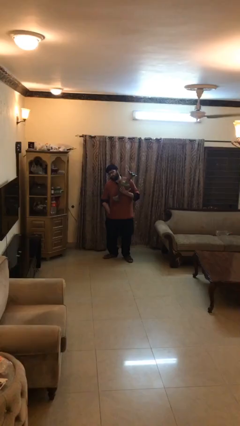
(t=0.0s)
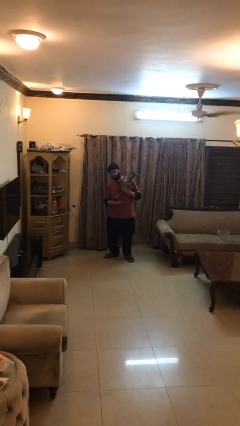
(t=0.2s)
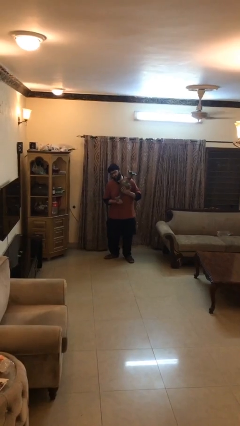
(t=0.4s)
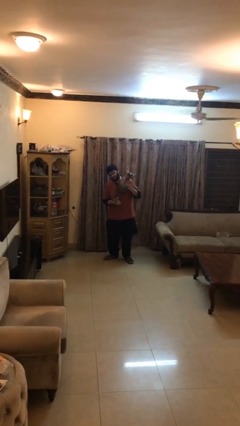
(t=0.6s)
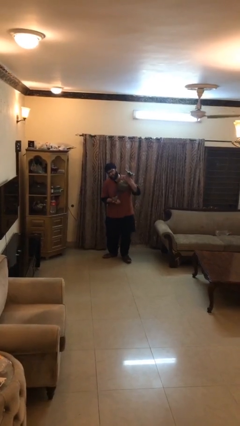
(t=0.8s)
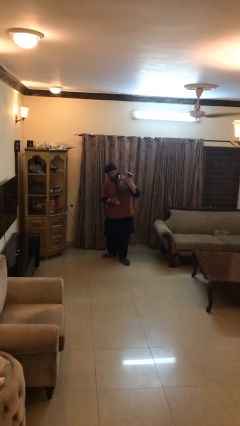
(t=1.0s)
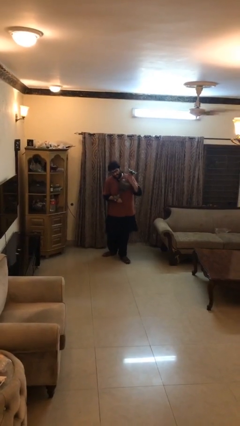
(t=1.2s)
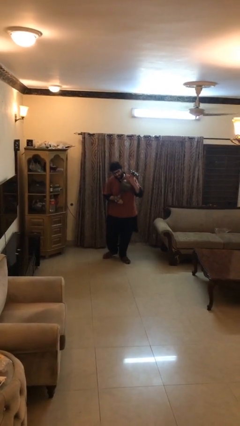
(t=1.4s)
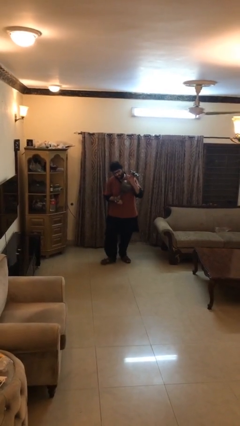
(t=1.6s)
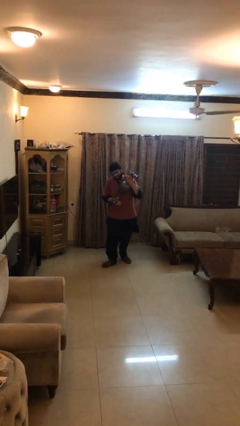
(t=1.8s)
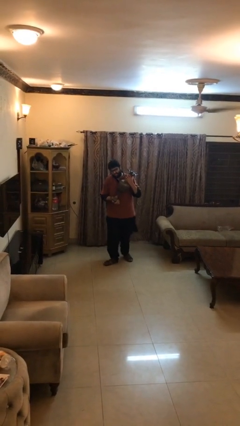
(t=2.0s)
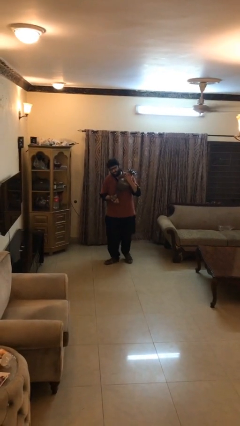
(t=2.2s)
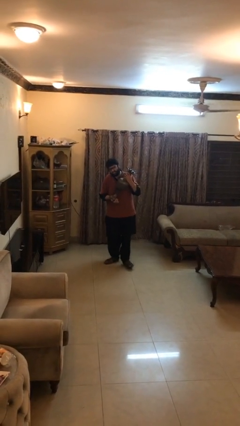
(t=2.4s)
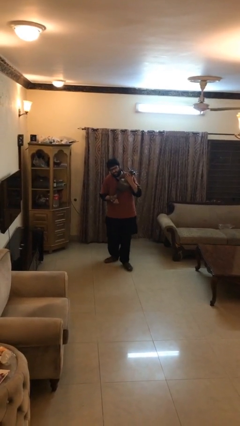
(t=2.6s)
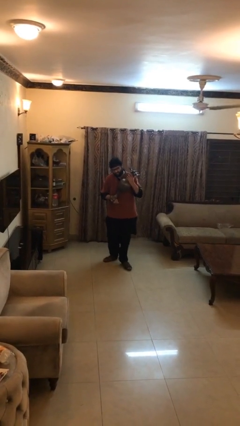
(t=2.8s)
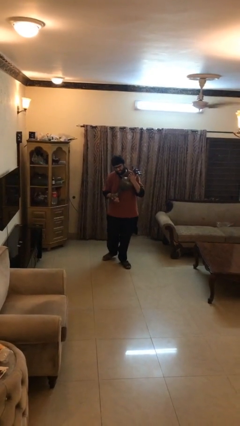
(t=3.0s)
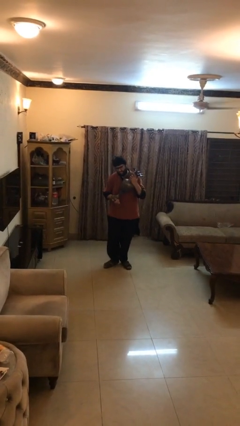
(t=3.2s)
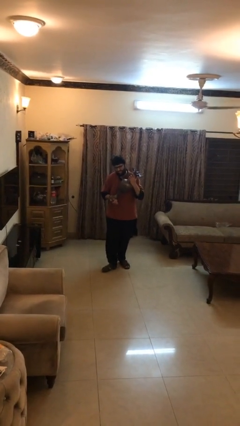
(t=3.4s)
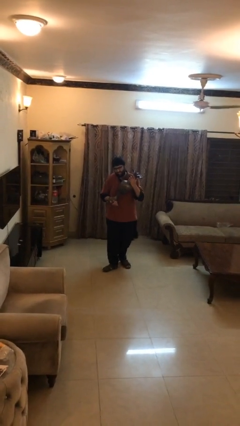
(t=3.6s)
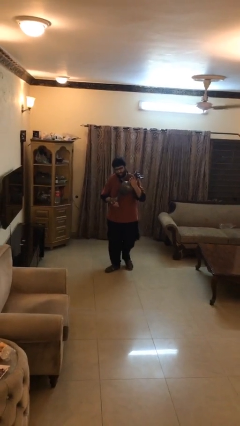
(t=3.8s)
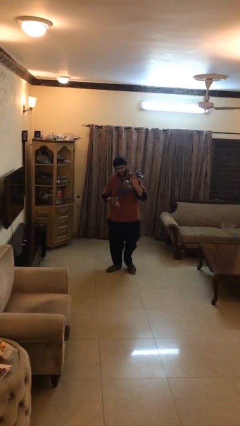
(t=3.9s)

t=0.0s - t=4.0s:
person carries heavy object

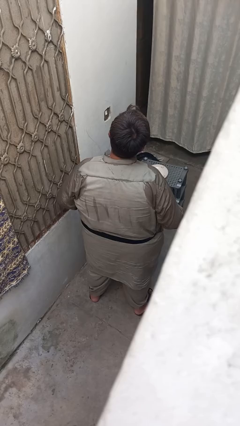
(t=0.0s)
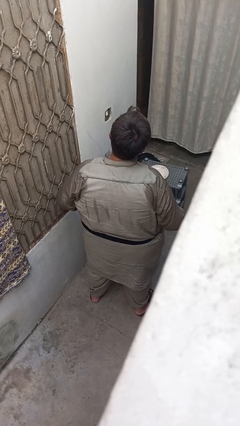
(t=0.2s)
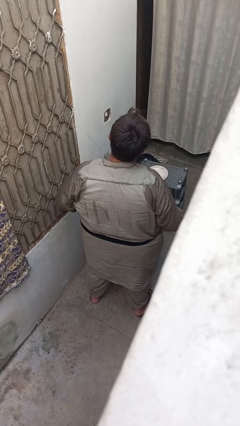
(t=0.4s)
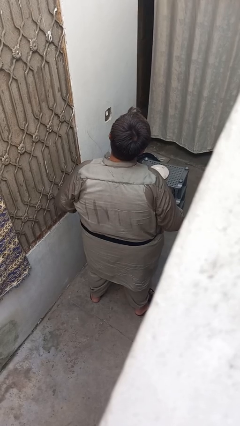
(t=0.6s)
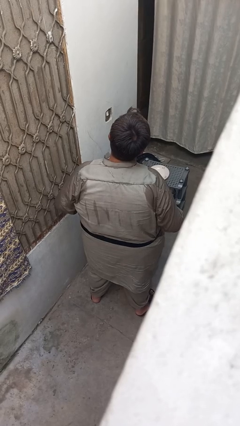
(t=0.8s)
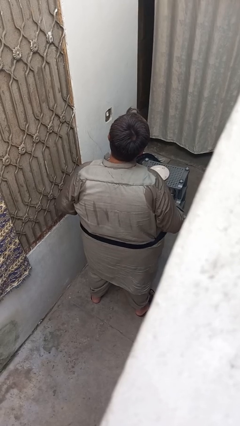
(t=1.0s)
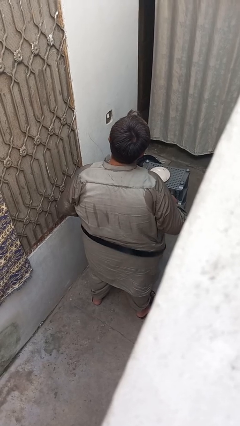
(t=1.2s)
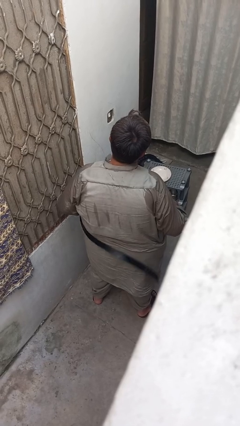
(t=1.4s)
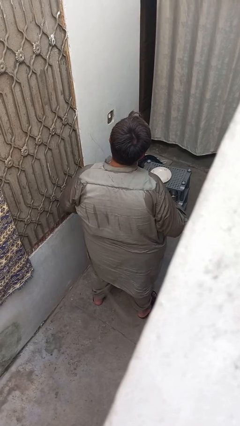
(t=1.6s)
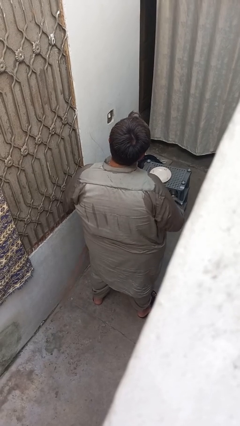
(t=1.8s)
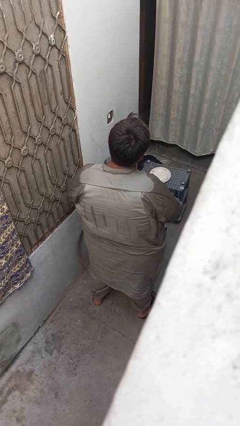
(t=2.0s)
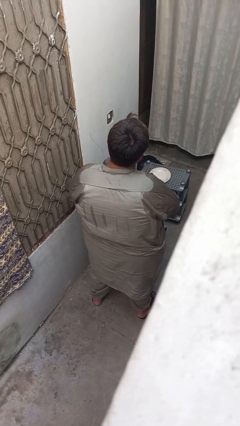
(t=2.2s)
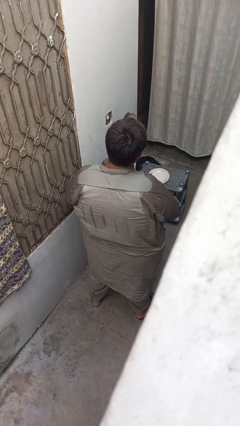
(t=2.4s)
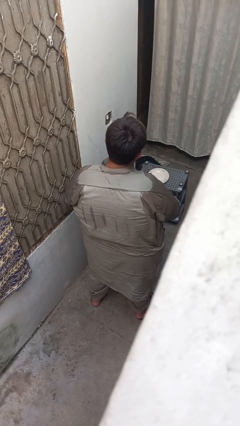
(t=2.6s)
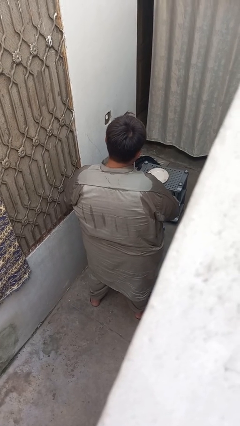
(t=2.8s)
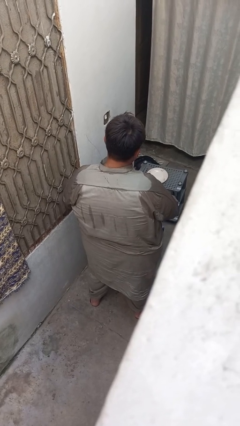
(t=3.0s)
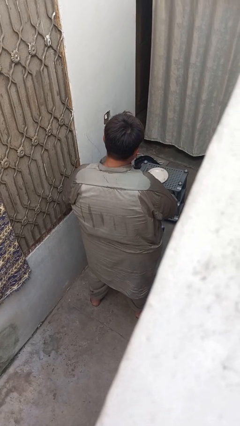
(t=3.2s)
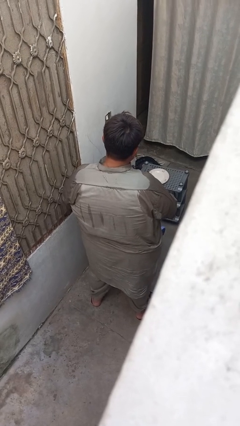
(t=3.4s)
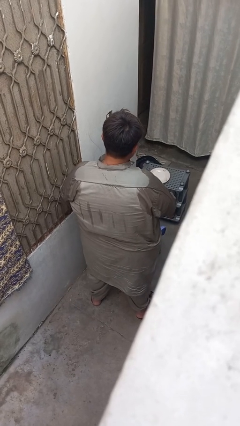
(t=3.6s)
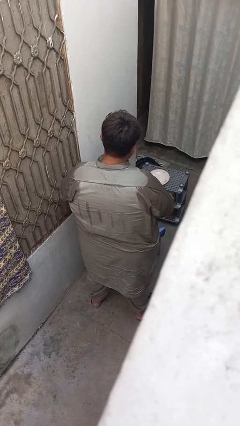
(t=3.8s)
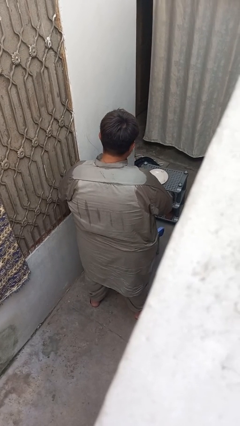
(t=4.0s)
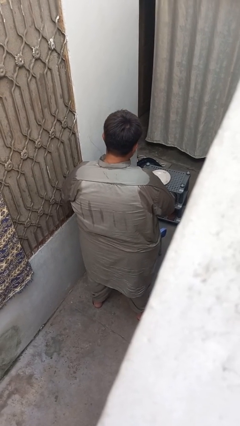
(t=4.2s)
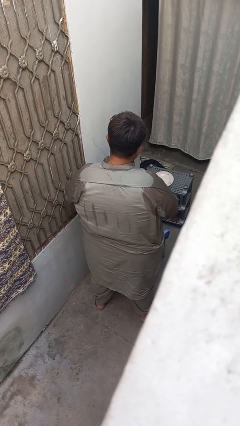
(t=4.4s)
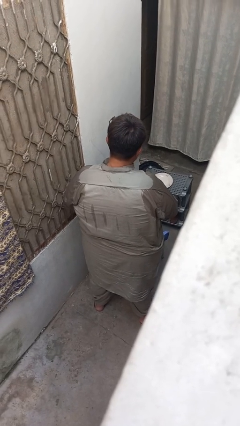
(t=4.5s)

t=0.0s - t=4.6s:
person takes off belt

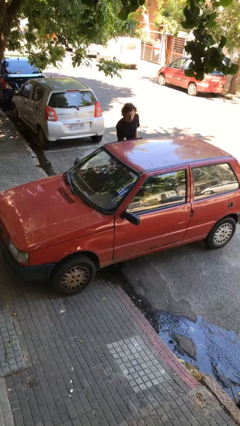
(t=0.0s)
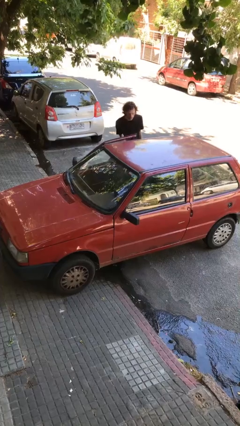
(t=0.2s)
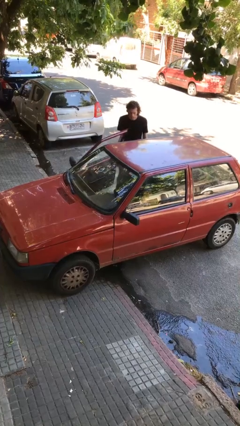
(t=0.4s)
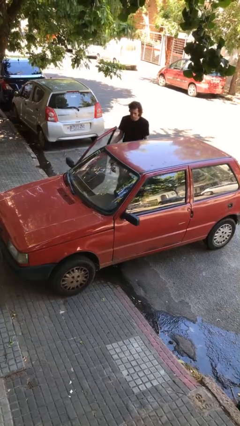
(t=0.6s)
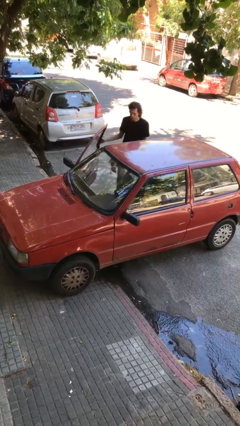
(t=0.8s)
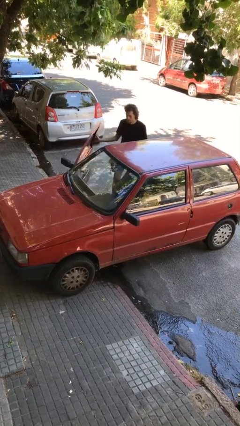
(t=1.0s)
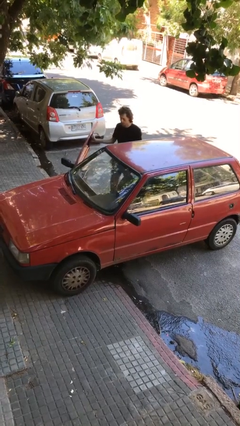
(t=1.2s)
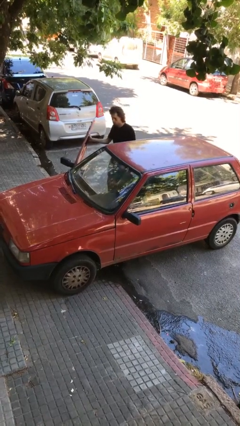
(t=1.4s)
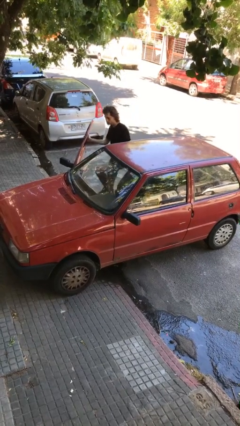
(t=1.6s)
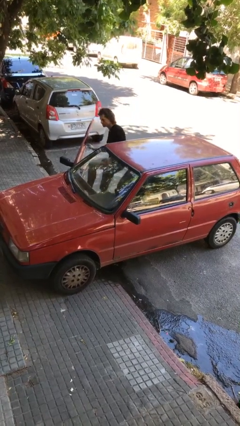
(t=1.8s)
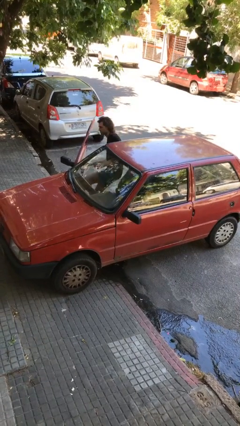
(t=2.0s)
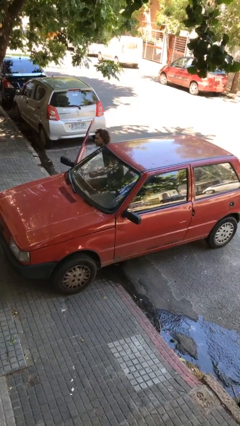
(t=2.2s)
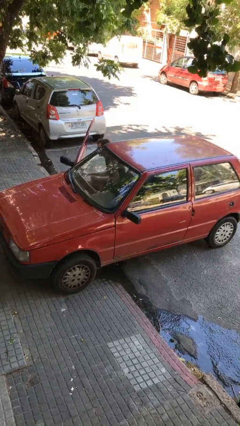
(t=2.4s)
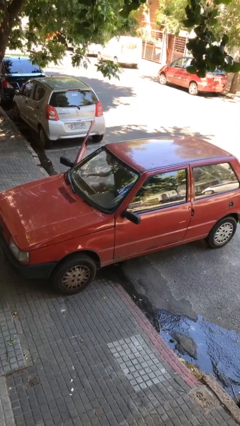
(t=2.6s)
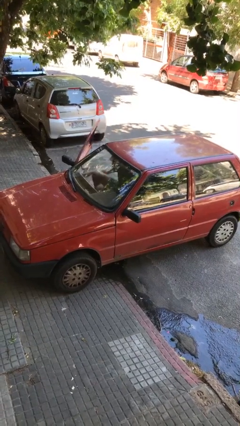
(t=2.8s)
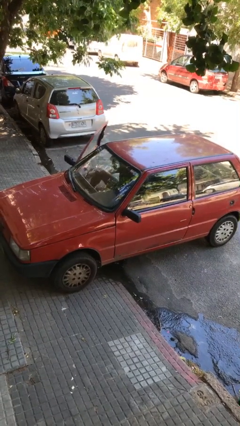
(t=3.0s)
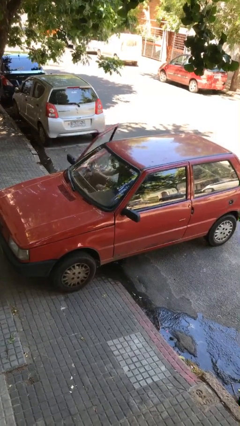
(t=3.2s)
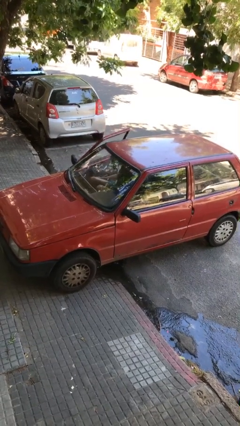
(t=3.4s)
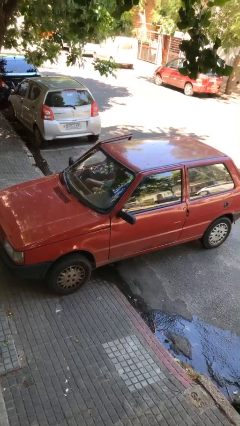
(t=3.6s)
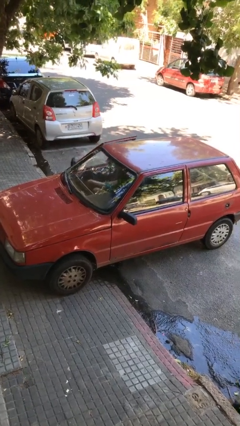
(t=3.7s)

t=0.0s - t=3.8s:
car picks up person

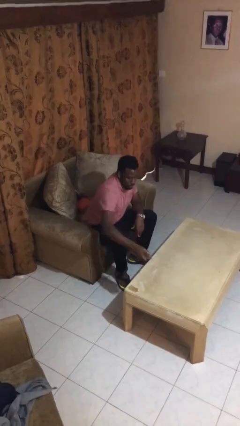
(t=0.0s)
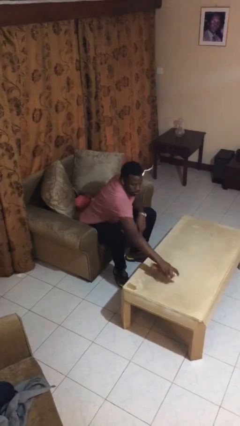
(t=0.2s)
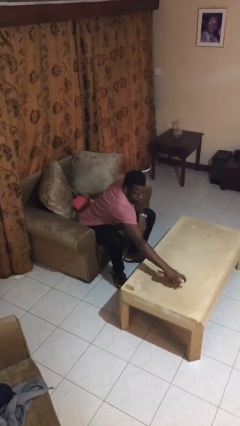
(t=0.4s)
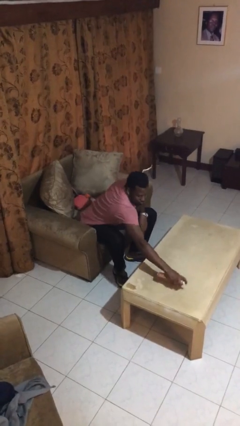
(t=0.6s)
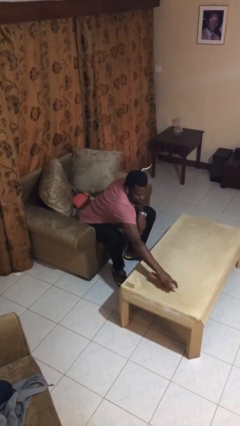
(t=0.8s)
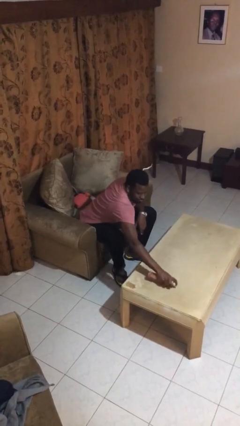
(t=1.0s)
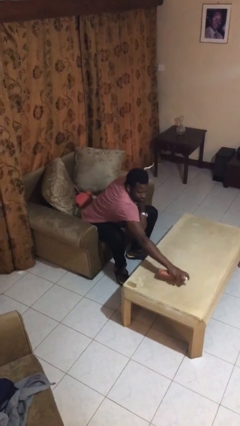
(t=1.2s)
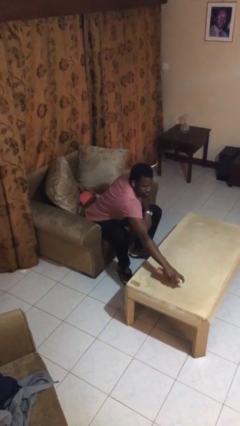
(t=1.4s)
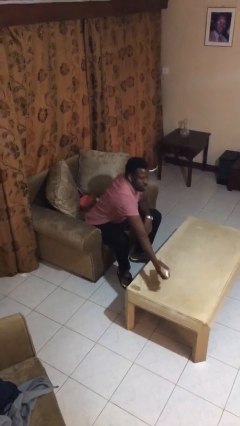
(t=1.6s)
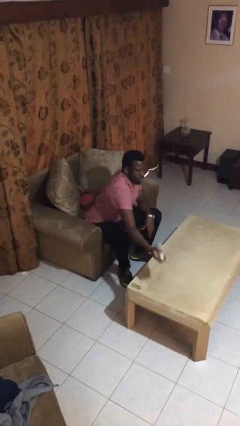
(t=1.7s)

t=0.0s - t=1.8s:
person sprays from bottle

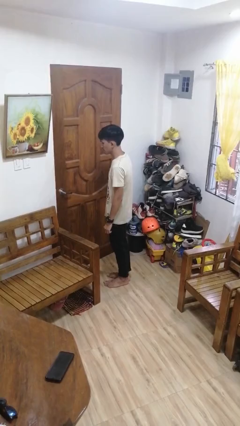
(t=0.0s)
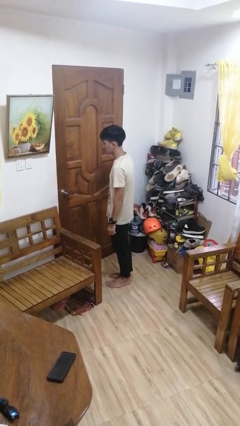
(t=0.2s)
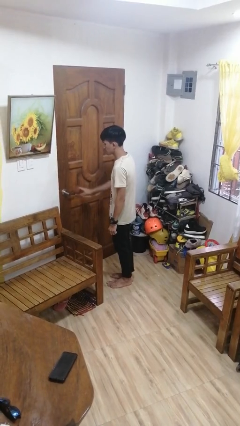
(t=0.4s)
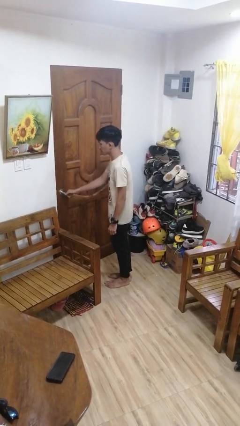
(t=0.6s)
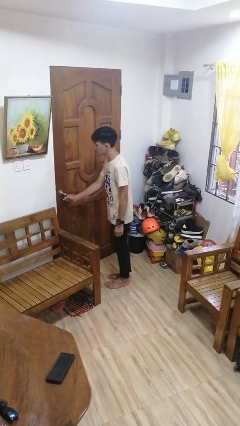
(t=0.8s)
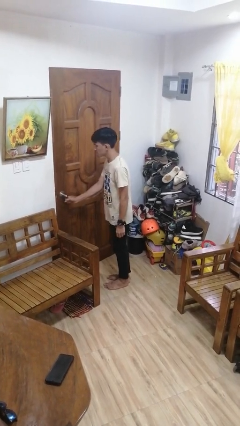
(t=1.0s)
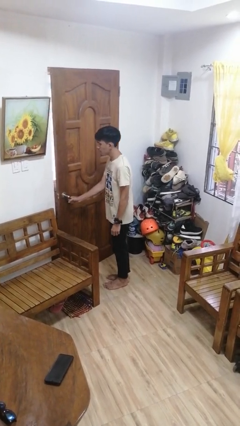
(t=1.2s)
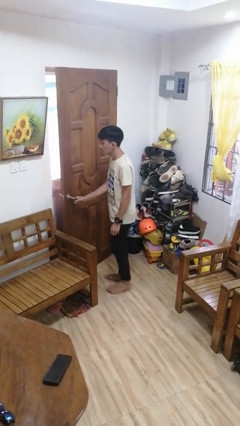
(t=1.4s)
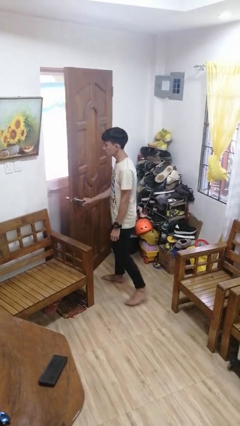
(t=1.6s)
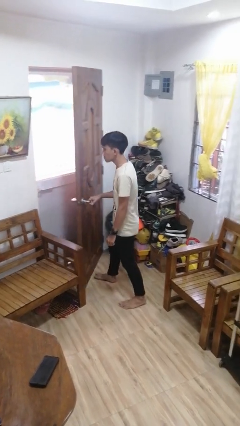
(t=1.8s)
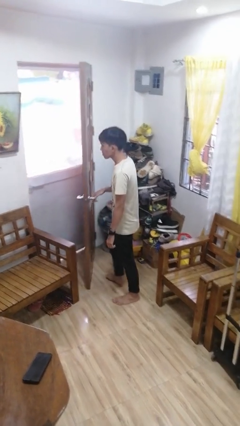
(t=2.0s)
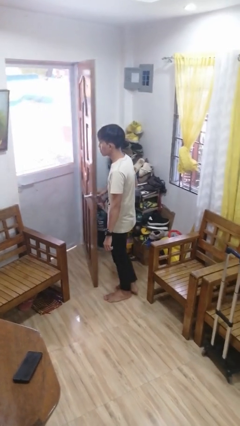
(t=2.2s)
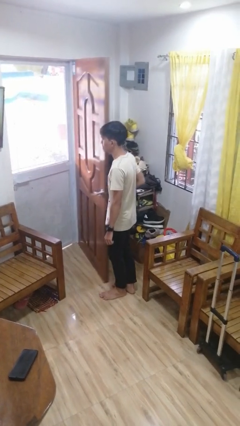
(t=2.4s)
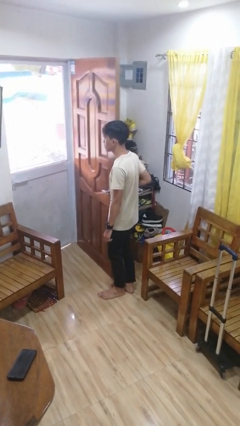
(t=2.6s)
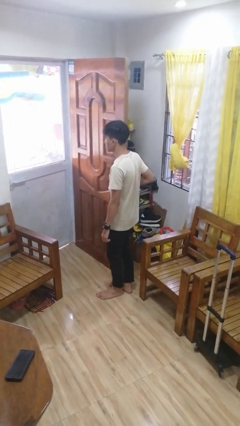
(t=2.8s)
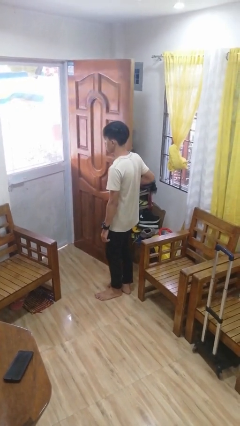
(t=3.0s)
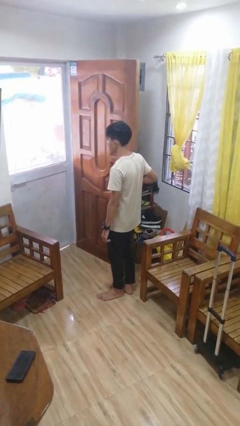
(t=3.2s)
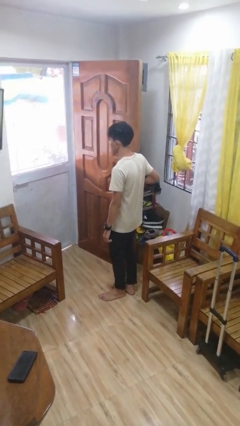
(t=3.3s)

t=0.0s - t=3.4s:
person opens facility door
